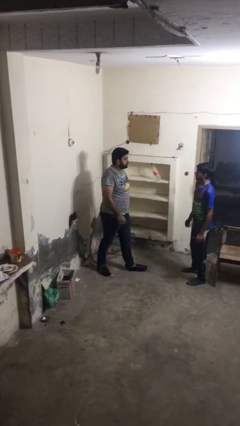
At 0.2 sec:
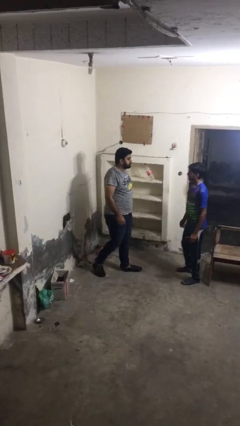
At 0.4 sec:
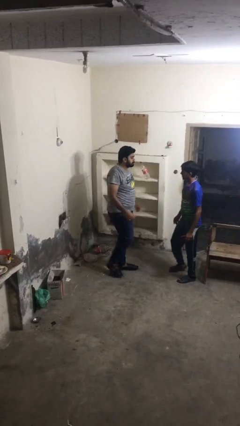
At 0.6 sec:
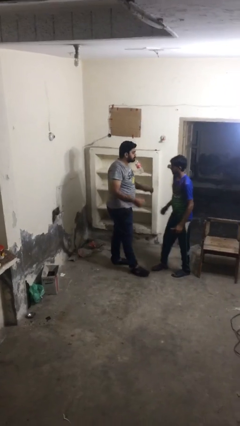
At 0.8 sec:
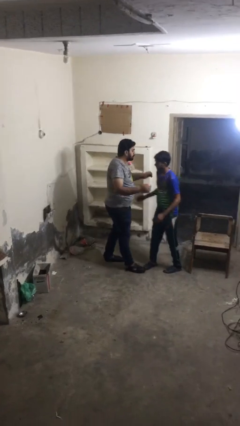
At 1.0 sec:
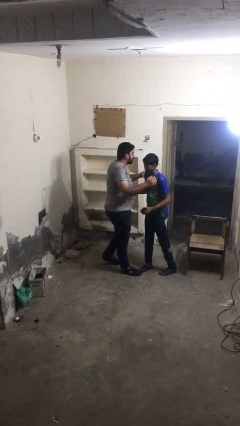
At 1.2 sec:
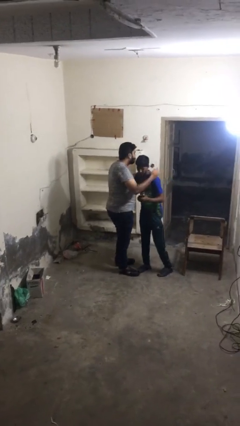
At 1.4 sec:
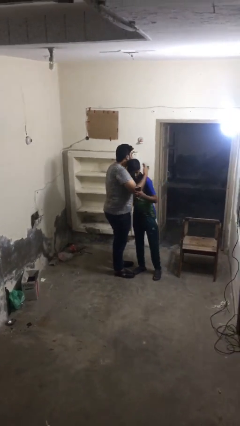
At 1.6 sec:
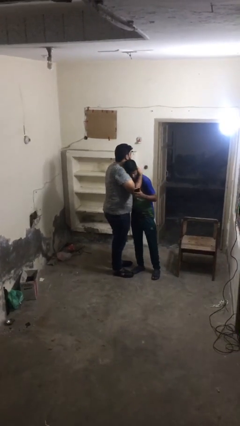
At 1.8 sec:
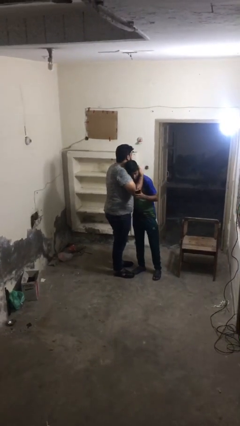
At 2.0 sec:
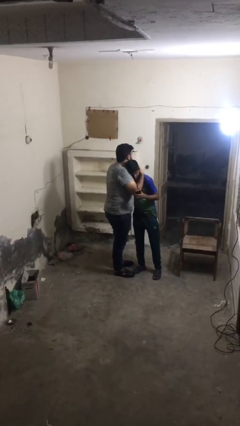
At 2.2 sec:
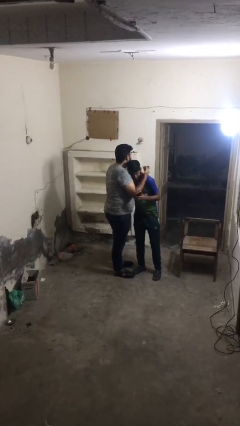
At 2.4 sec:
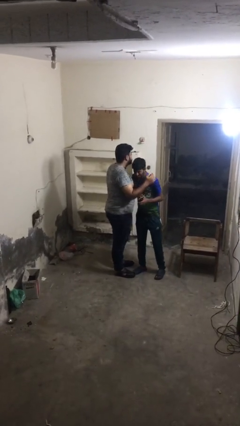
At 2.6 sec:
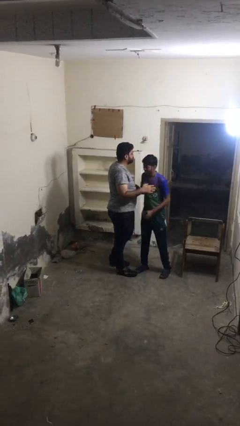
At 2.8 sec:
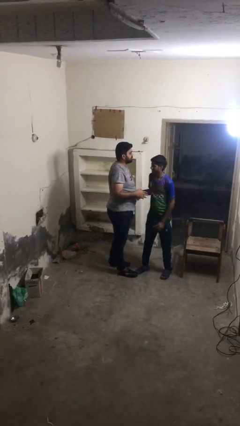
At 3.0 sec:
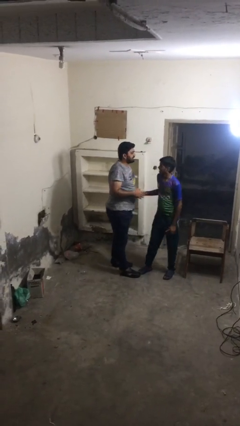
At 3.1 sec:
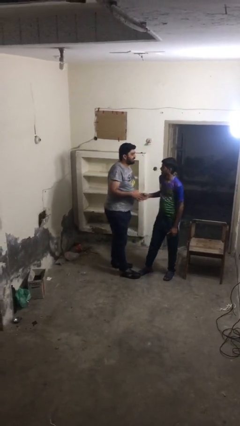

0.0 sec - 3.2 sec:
person embraces person

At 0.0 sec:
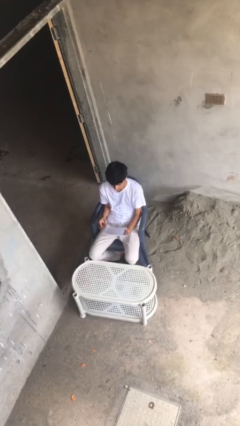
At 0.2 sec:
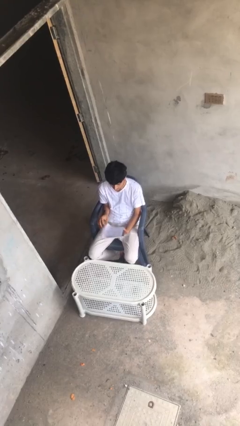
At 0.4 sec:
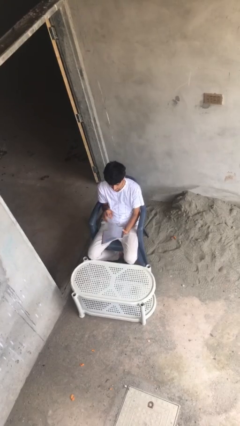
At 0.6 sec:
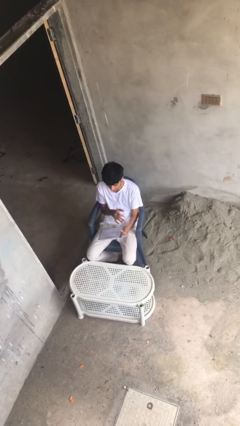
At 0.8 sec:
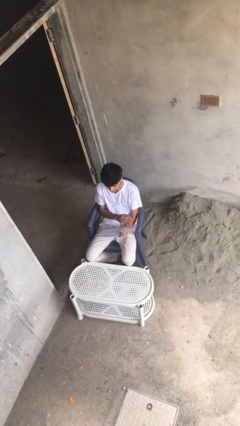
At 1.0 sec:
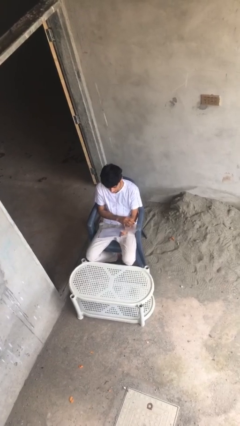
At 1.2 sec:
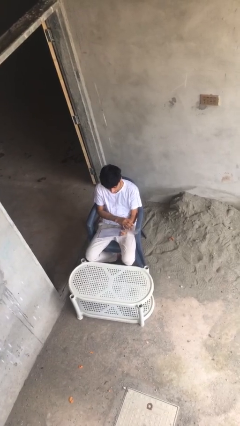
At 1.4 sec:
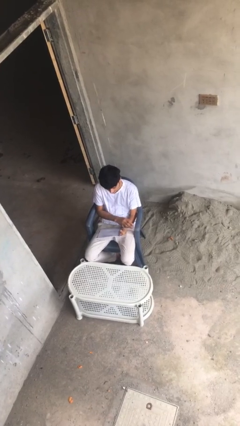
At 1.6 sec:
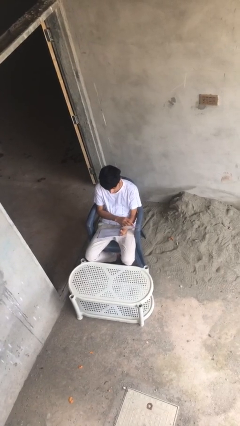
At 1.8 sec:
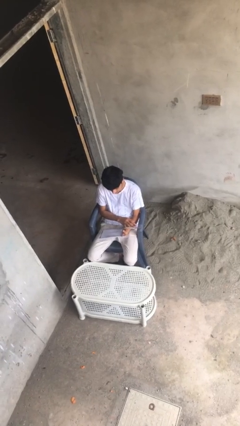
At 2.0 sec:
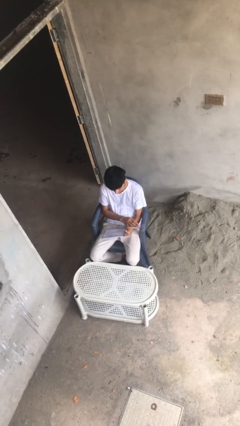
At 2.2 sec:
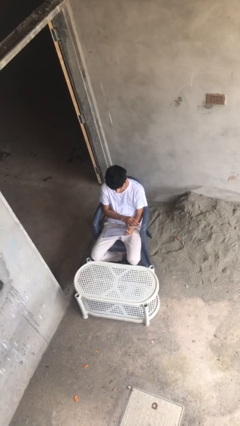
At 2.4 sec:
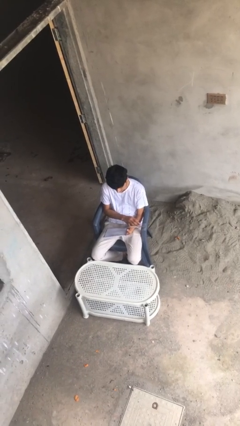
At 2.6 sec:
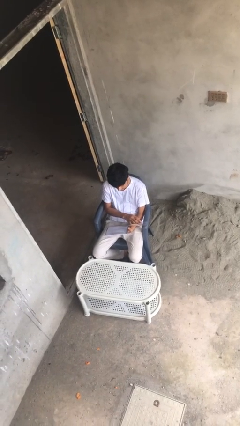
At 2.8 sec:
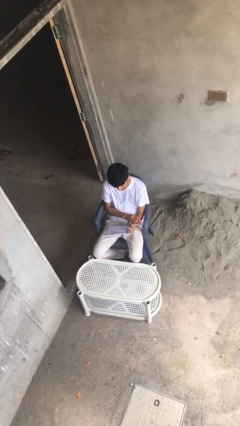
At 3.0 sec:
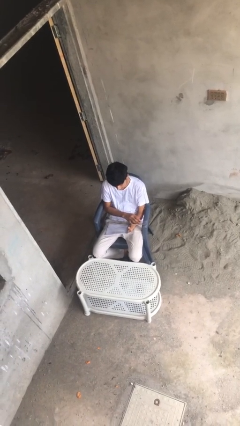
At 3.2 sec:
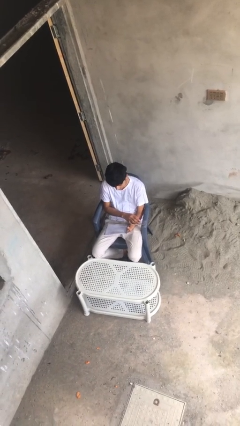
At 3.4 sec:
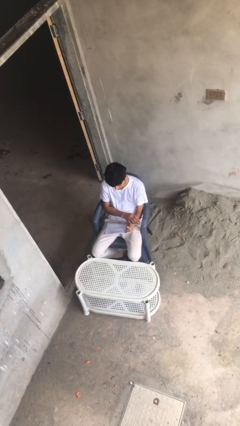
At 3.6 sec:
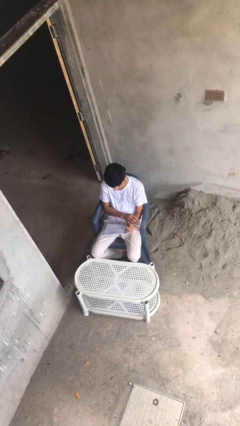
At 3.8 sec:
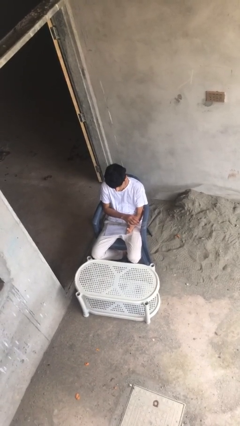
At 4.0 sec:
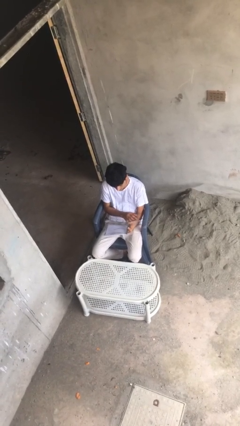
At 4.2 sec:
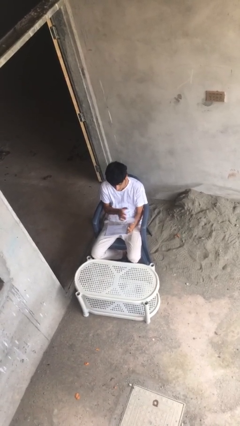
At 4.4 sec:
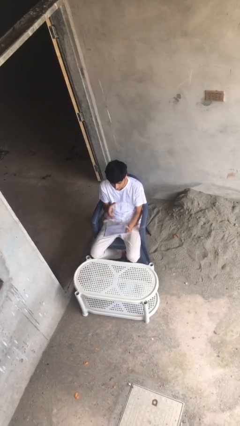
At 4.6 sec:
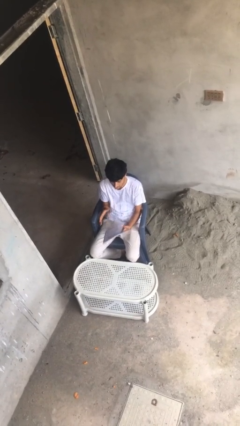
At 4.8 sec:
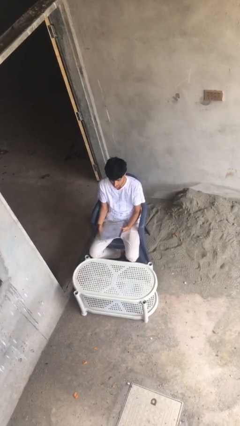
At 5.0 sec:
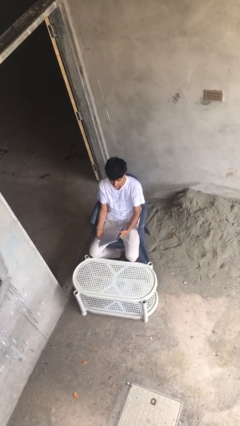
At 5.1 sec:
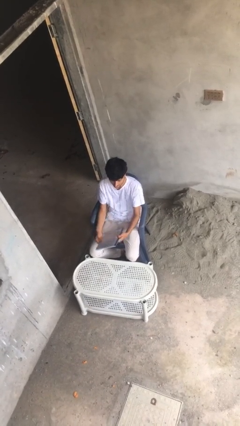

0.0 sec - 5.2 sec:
person reads document

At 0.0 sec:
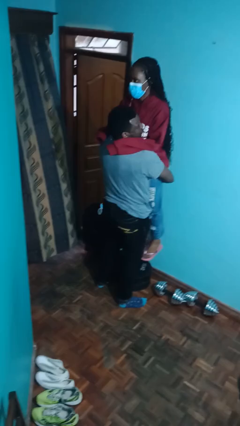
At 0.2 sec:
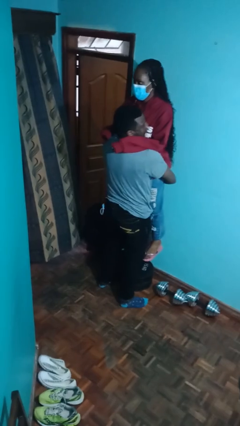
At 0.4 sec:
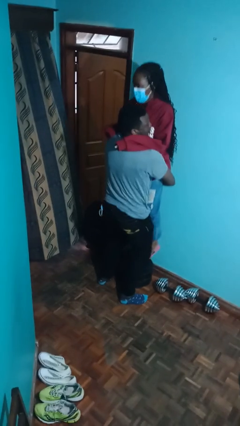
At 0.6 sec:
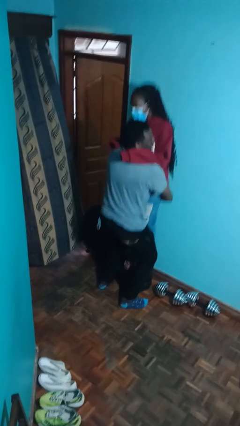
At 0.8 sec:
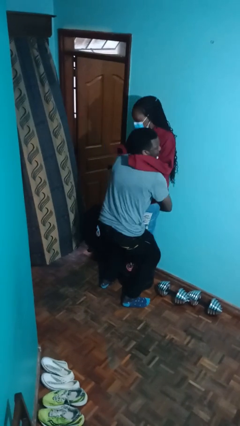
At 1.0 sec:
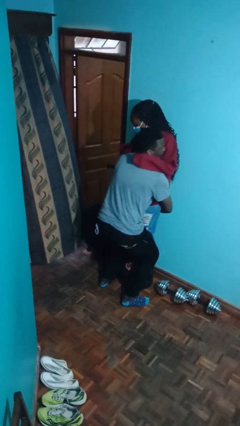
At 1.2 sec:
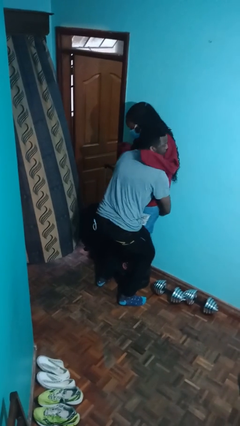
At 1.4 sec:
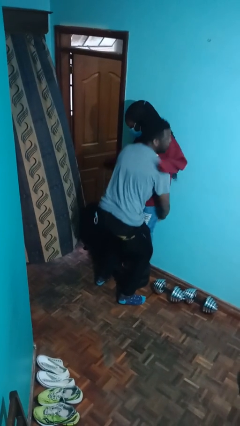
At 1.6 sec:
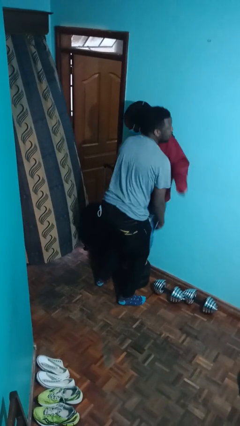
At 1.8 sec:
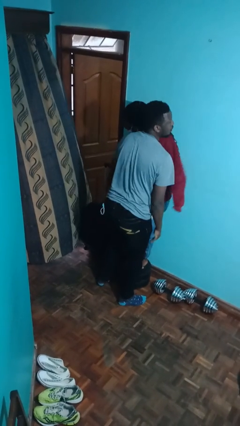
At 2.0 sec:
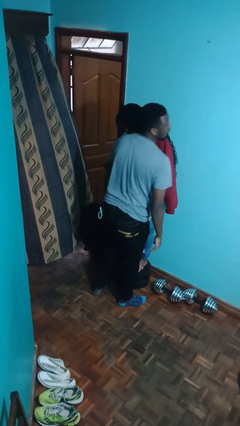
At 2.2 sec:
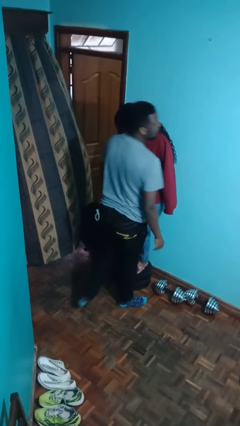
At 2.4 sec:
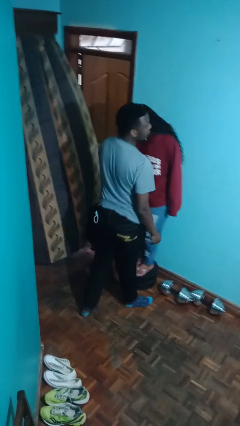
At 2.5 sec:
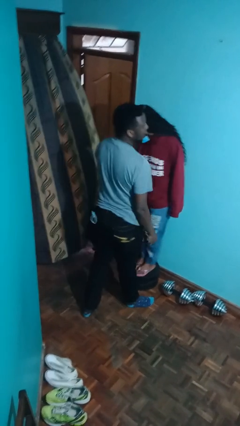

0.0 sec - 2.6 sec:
person puts down person

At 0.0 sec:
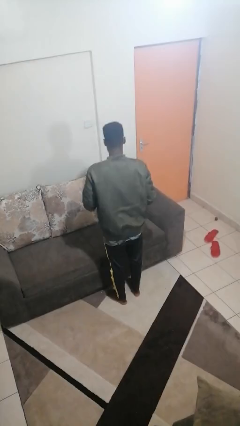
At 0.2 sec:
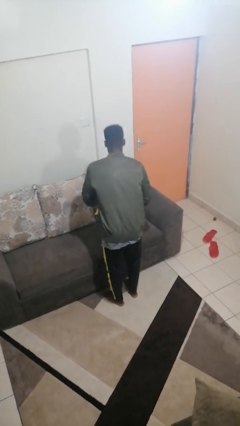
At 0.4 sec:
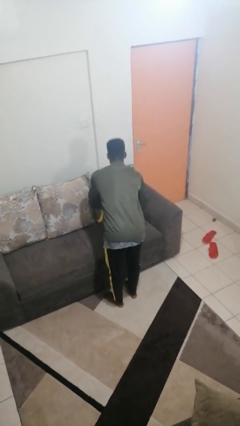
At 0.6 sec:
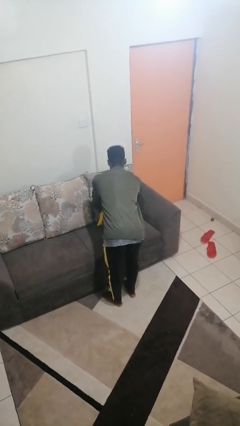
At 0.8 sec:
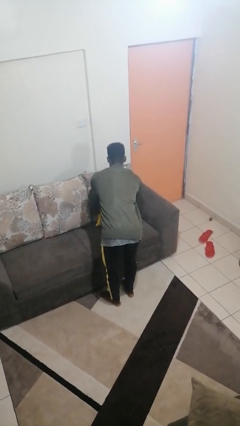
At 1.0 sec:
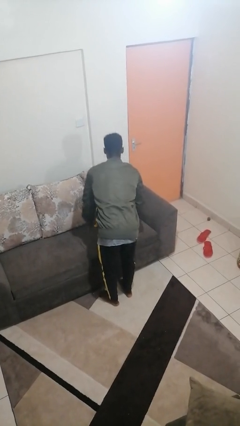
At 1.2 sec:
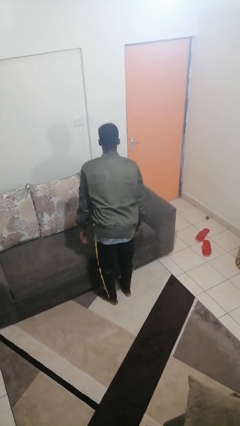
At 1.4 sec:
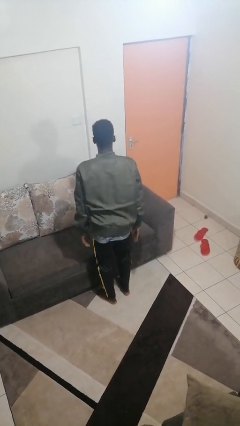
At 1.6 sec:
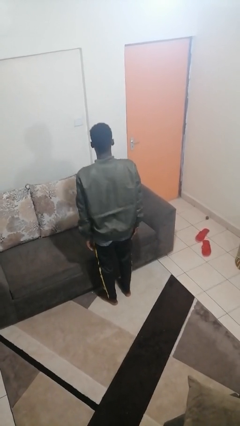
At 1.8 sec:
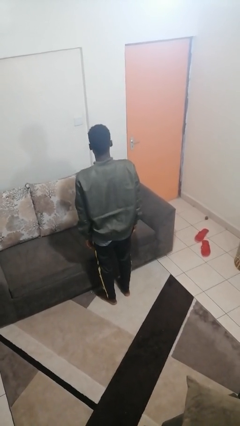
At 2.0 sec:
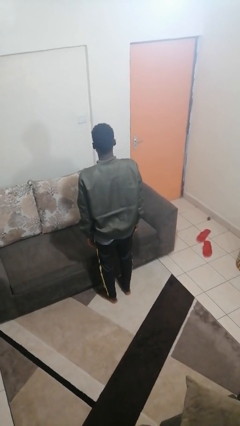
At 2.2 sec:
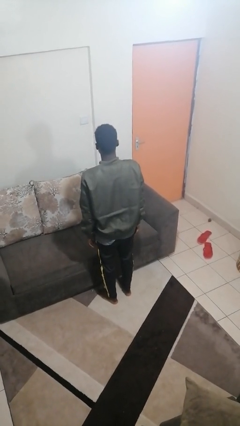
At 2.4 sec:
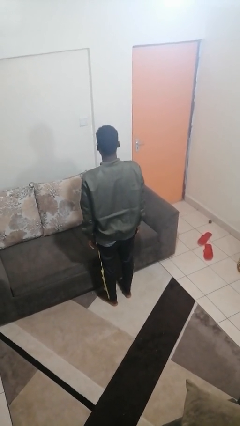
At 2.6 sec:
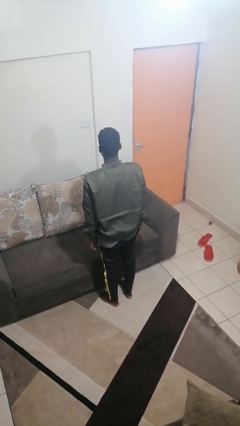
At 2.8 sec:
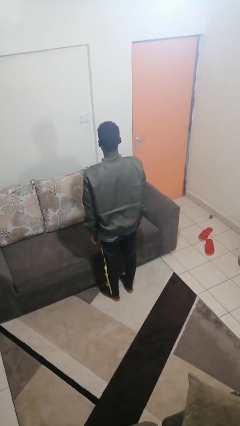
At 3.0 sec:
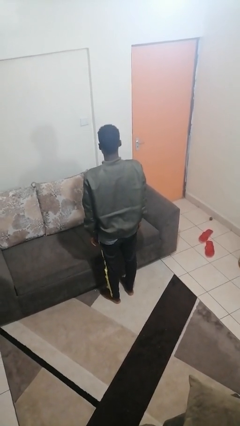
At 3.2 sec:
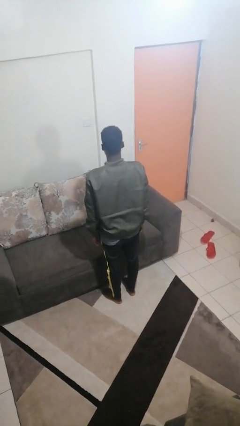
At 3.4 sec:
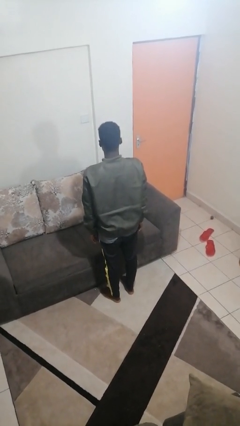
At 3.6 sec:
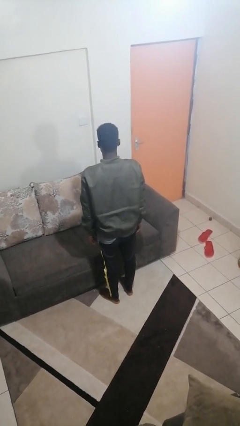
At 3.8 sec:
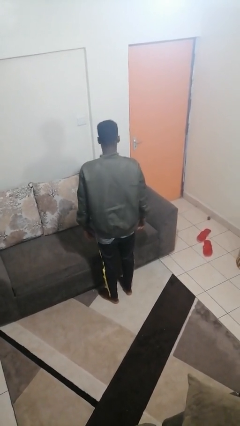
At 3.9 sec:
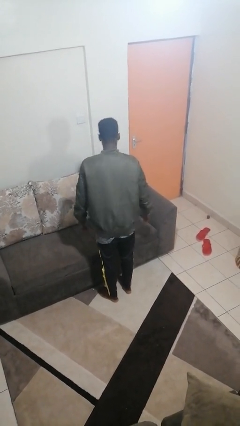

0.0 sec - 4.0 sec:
person puts down object on couch

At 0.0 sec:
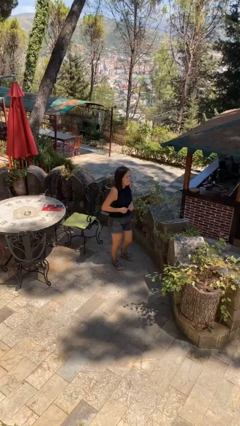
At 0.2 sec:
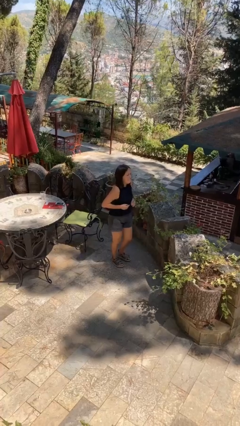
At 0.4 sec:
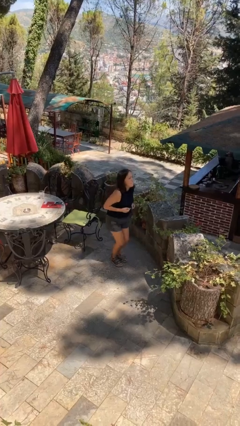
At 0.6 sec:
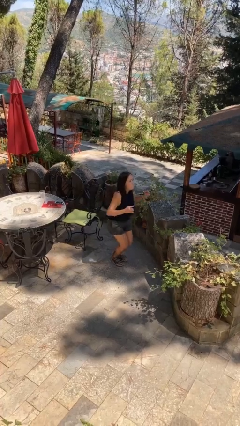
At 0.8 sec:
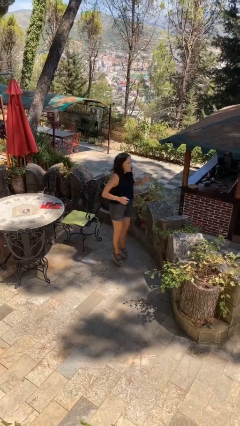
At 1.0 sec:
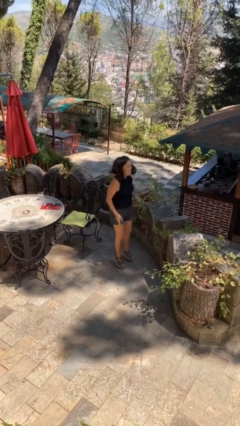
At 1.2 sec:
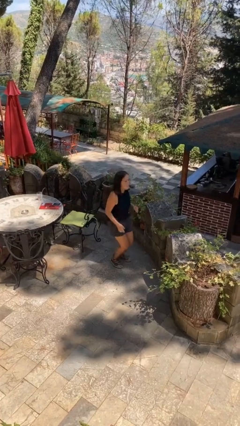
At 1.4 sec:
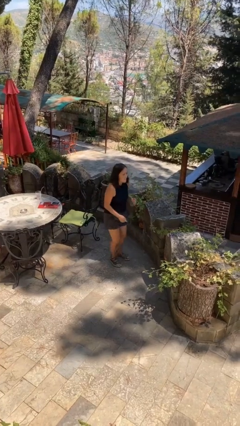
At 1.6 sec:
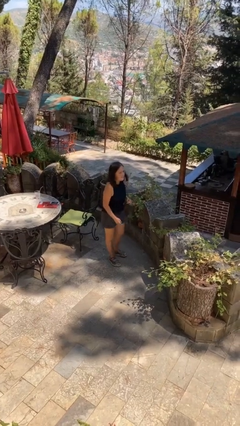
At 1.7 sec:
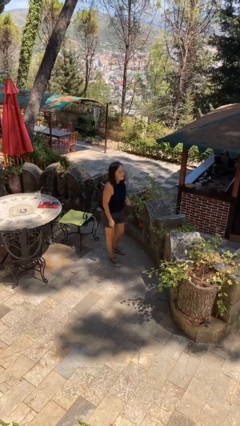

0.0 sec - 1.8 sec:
person jumps

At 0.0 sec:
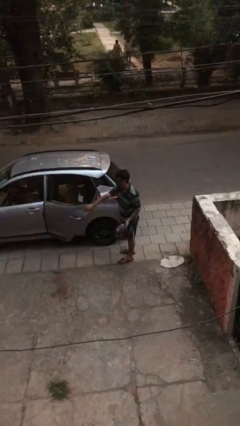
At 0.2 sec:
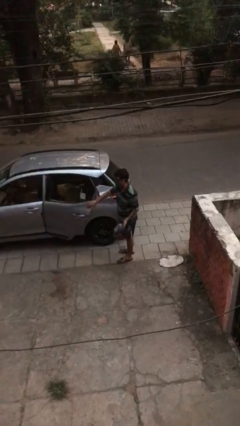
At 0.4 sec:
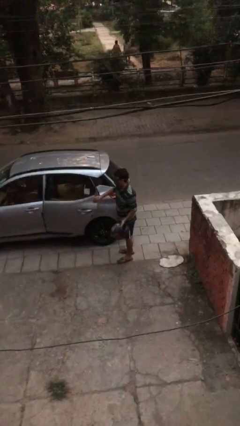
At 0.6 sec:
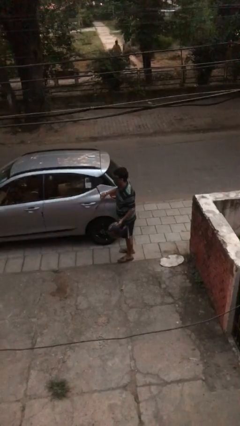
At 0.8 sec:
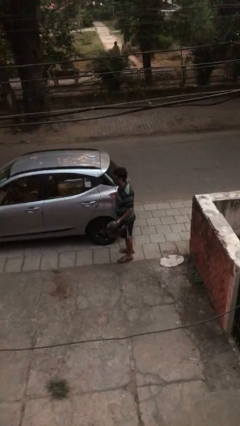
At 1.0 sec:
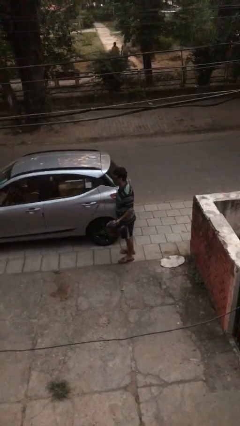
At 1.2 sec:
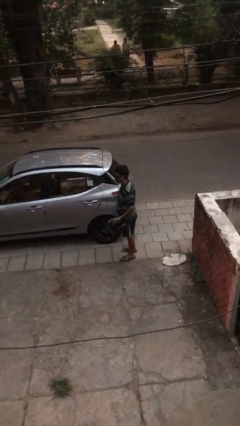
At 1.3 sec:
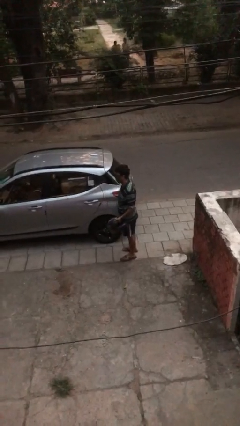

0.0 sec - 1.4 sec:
person closes car door
